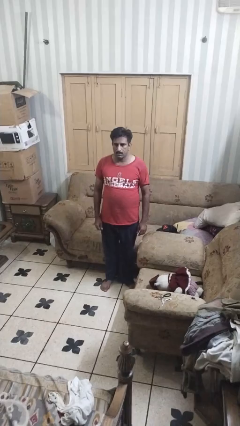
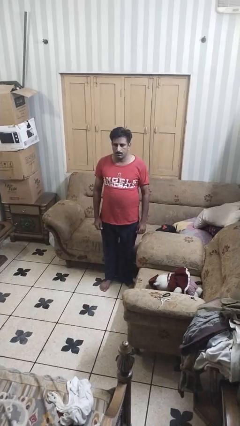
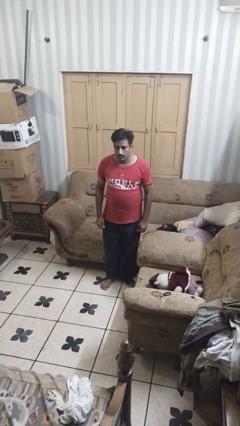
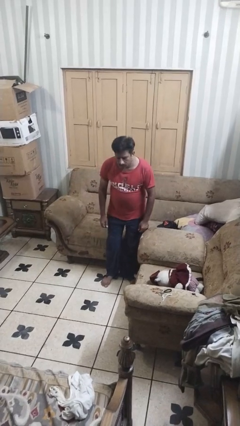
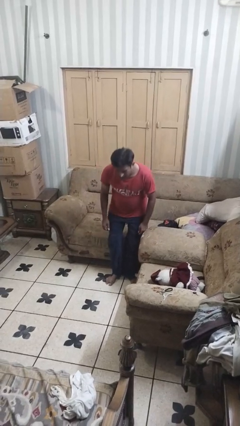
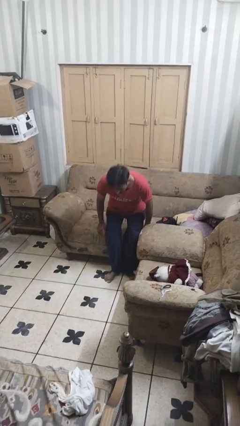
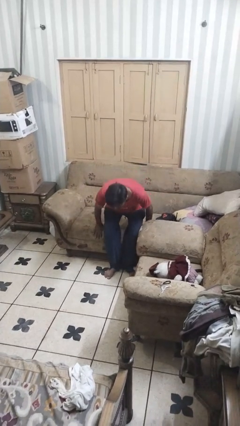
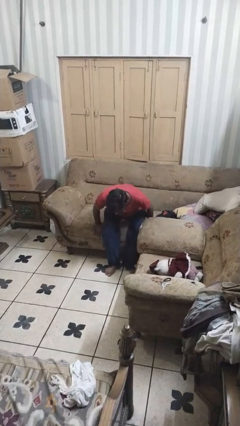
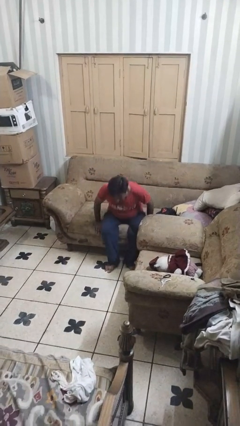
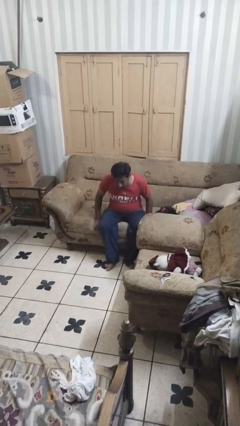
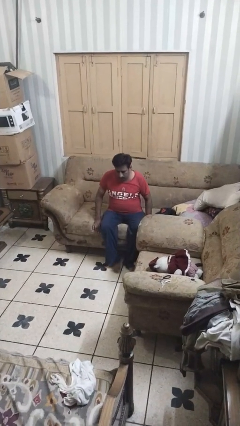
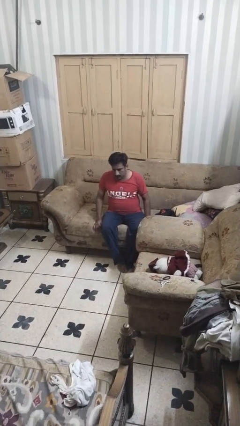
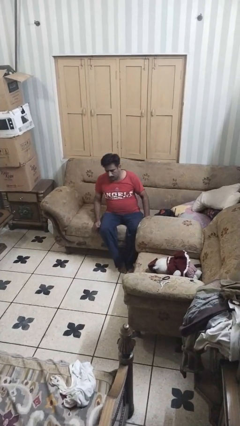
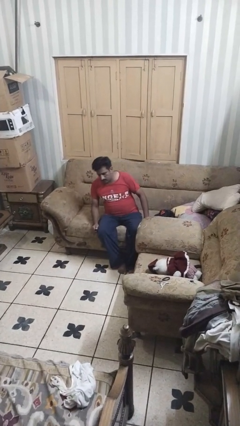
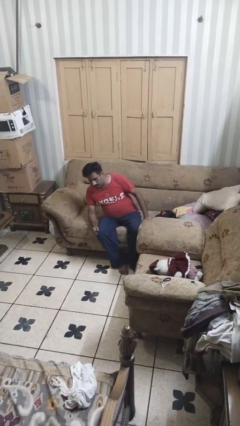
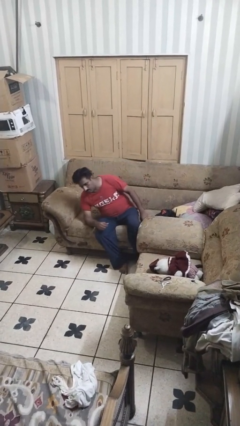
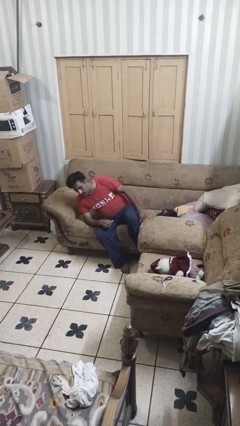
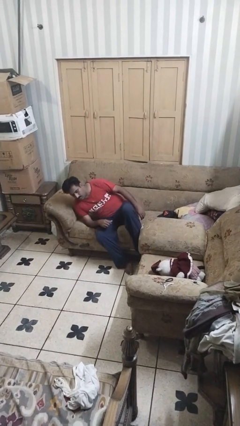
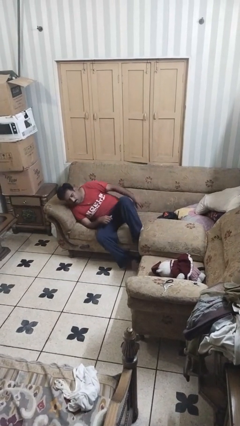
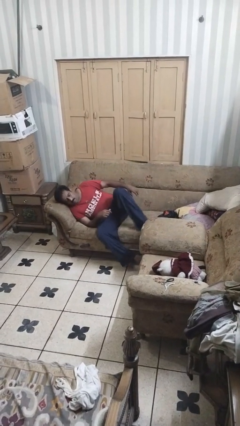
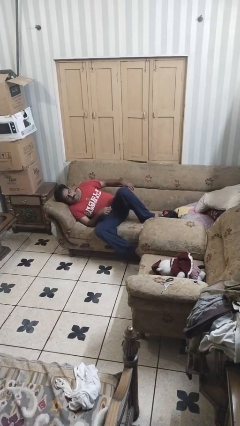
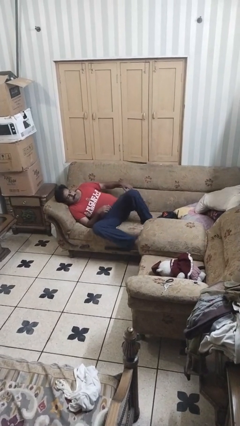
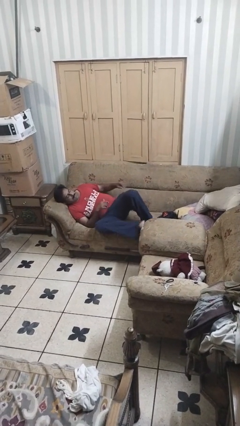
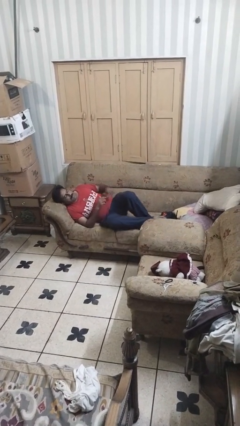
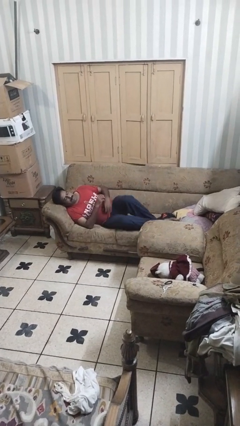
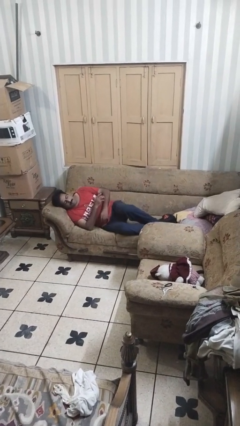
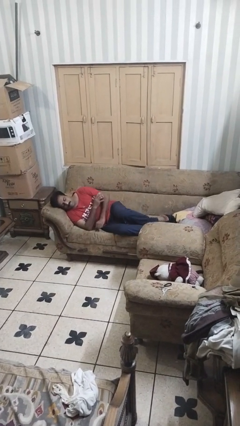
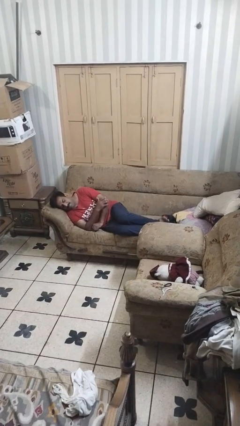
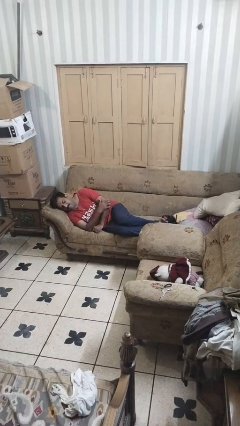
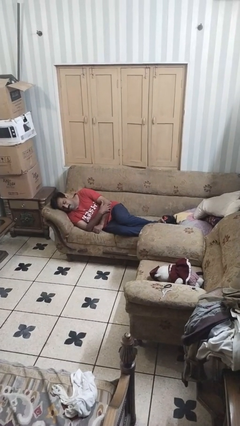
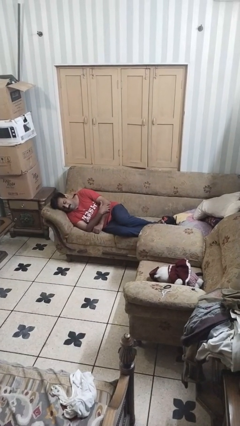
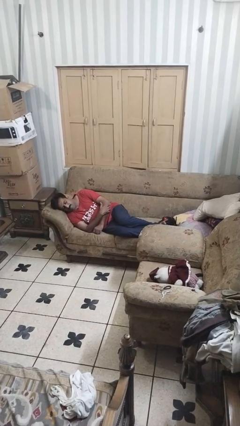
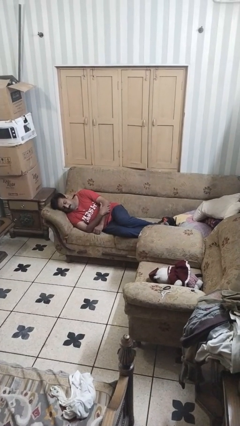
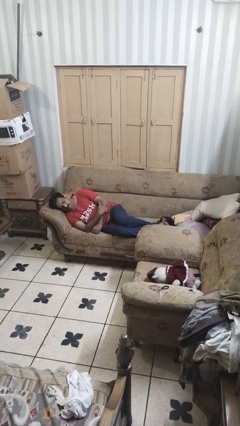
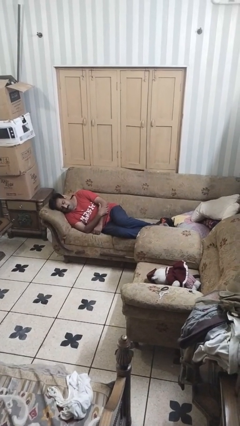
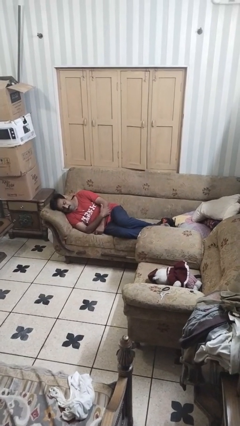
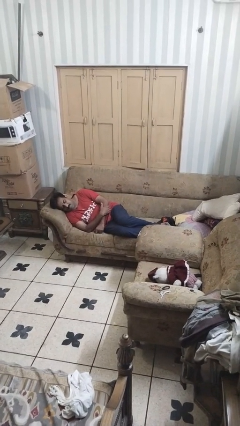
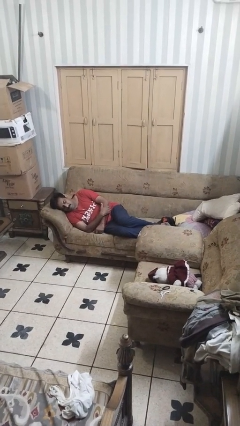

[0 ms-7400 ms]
person lies down on couch

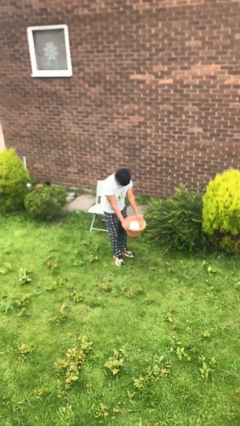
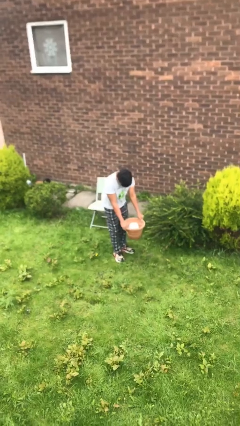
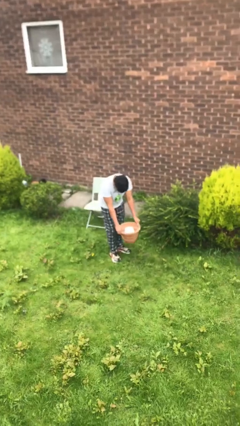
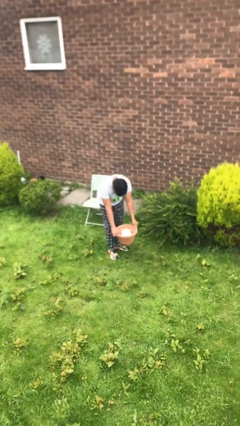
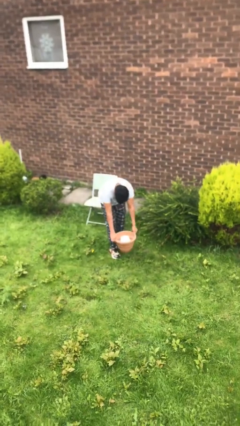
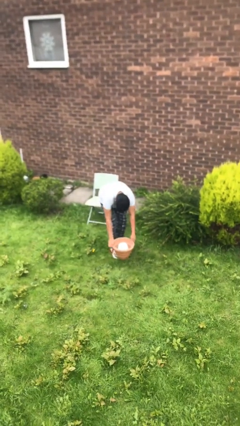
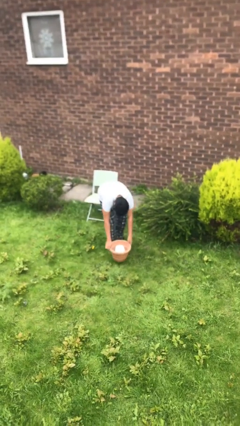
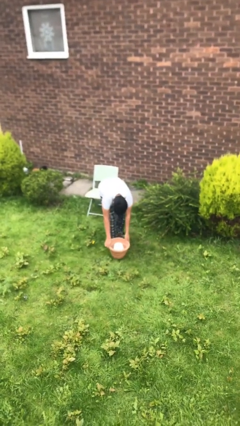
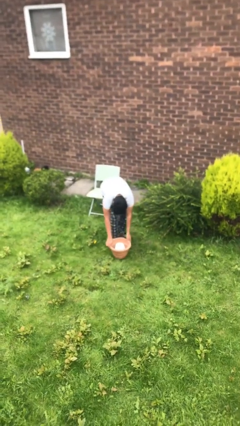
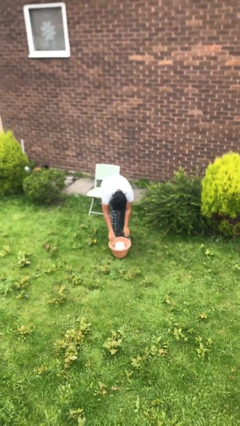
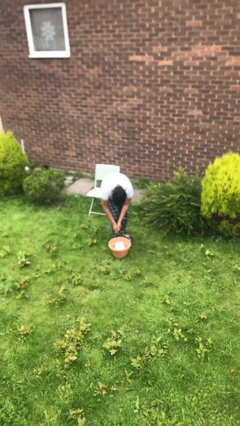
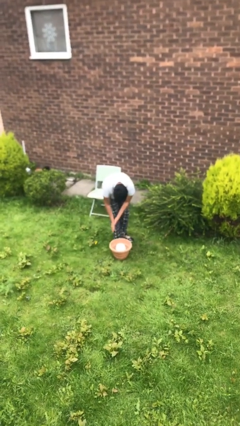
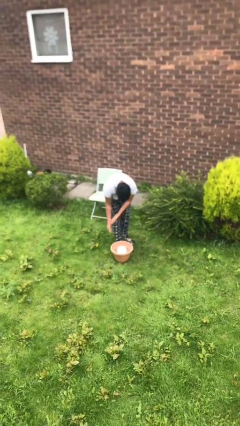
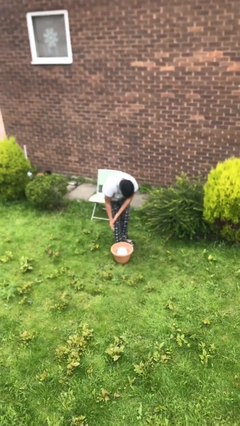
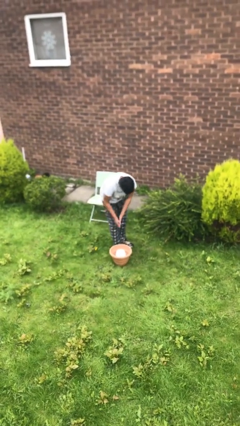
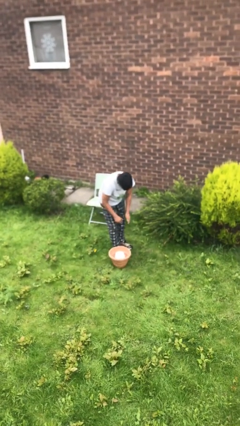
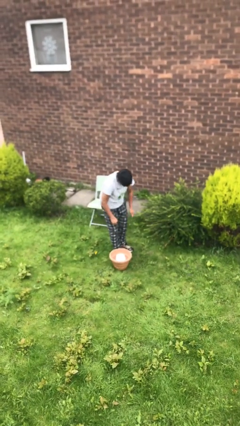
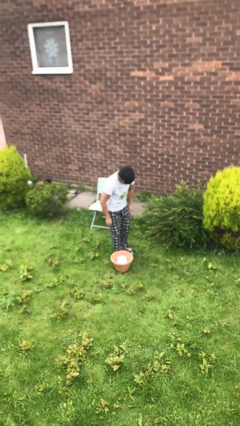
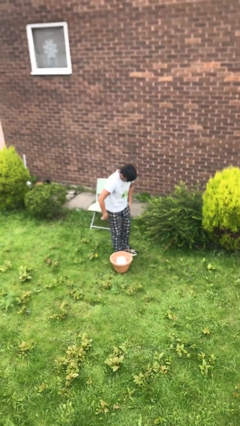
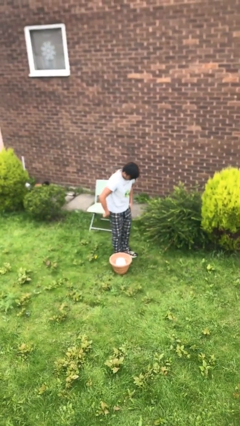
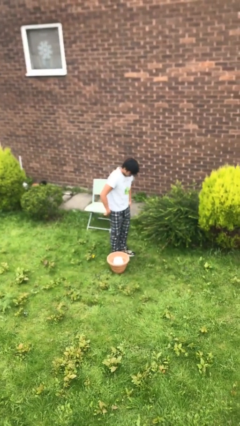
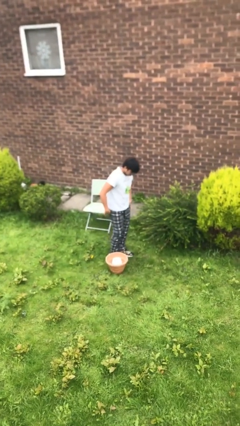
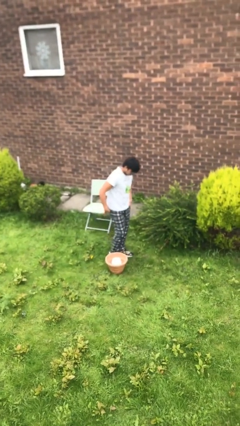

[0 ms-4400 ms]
person puts down object on floor

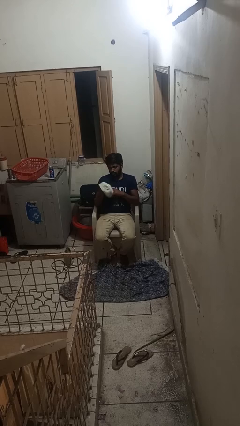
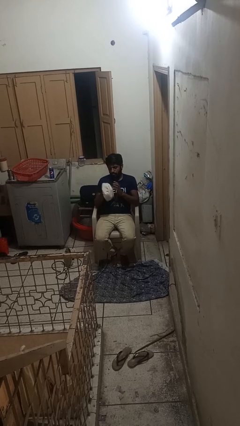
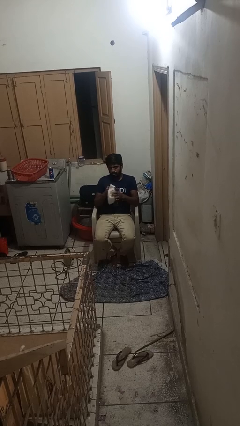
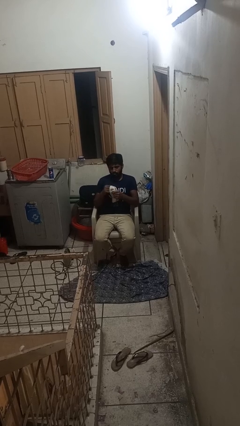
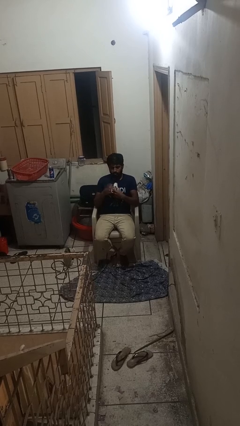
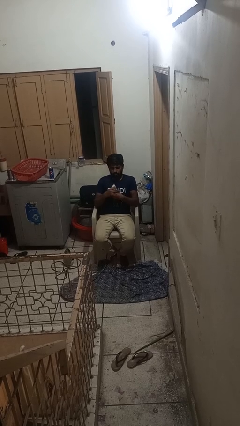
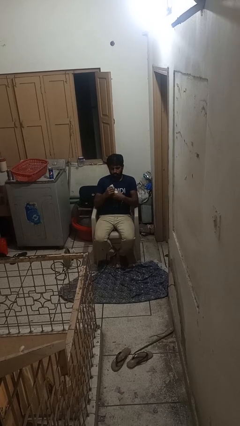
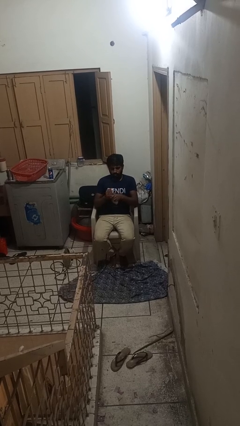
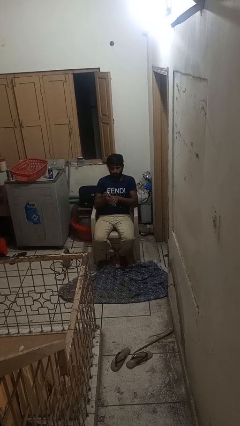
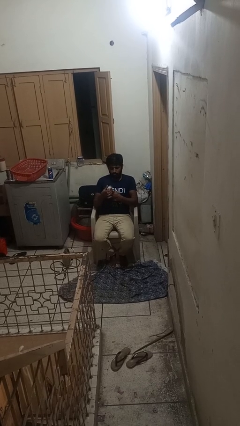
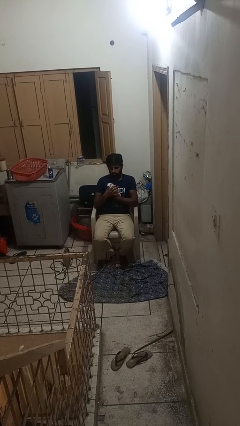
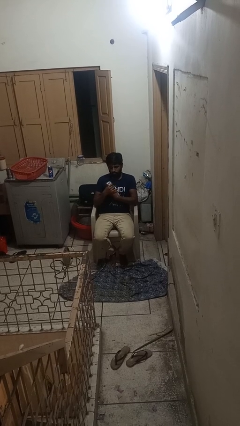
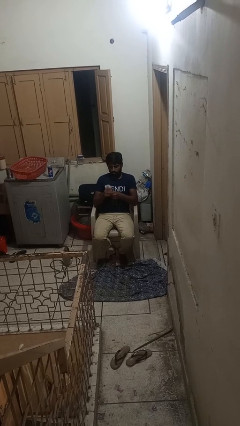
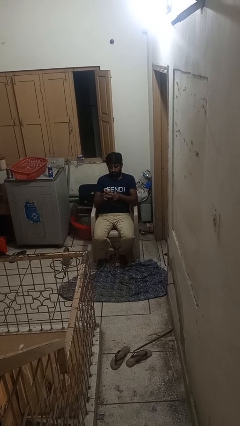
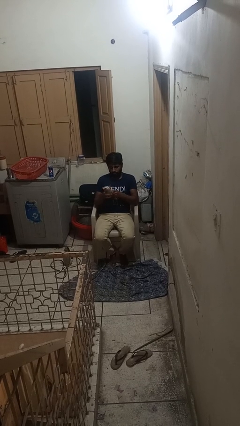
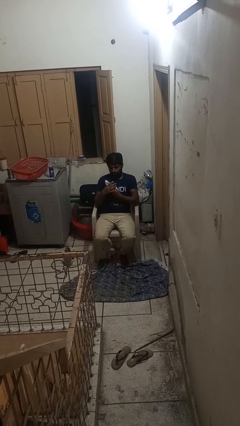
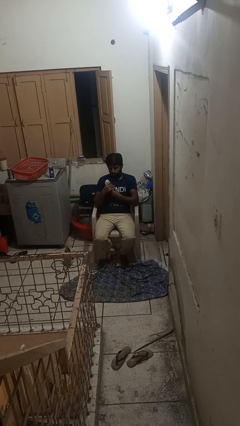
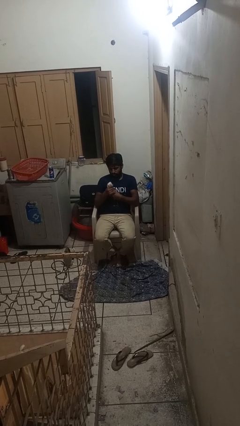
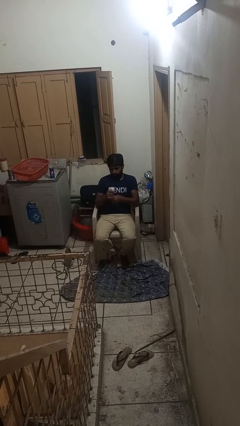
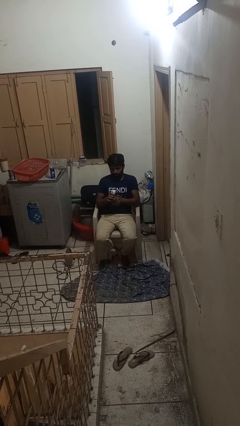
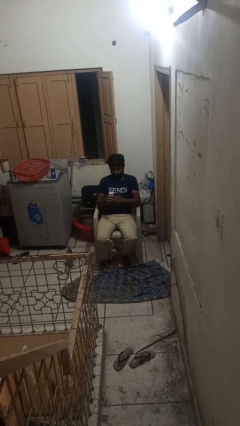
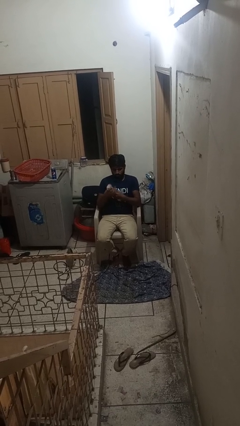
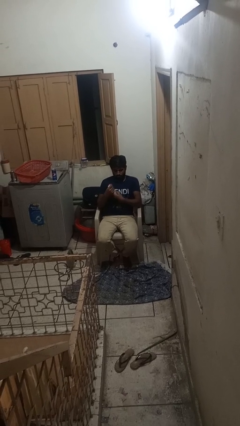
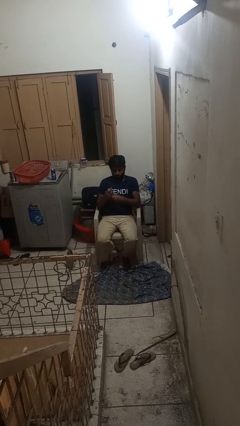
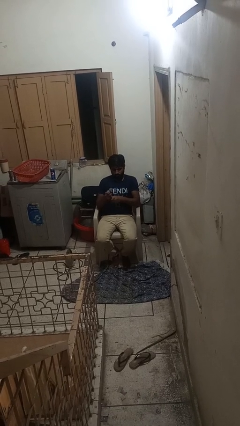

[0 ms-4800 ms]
person squeezes object

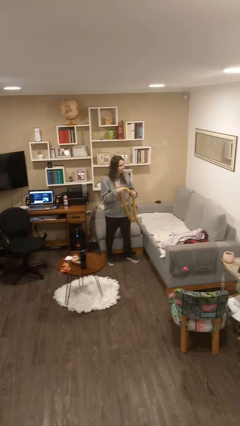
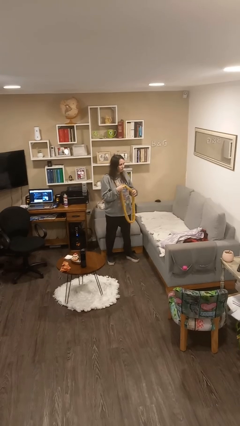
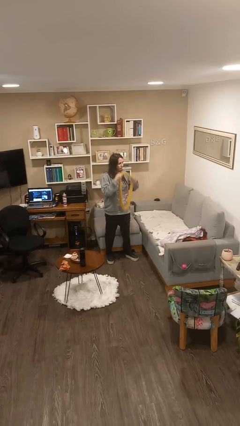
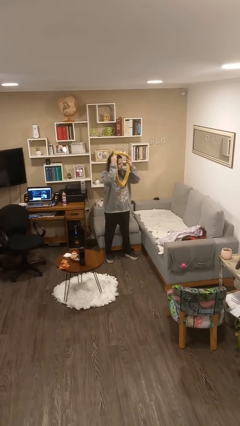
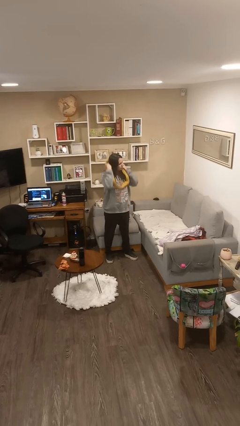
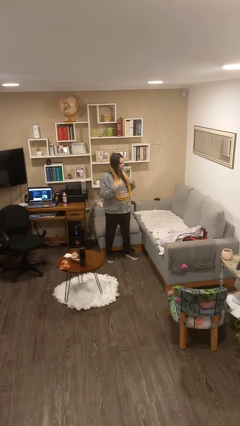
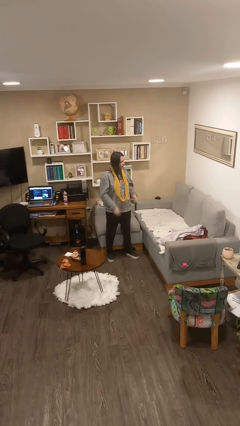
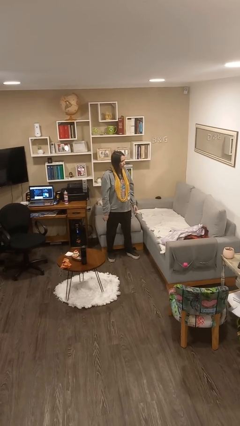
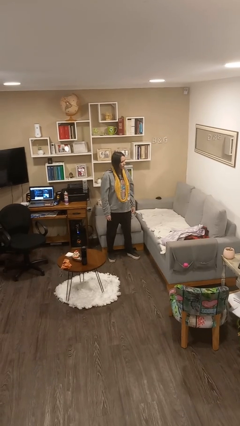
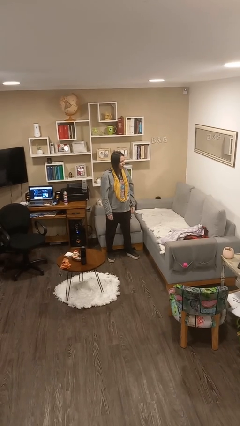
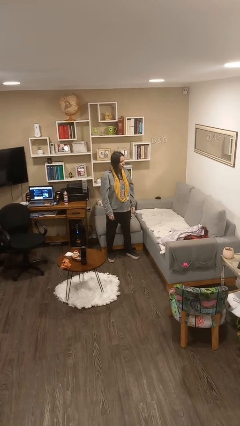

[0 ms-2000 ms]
person puts on scarf
